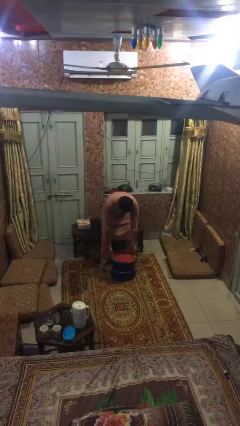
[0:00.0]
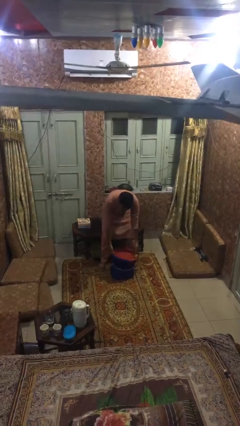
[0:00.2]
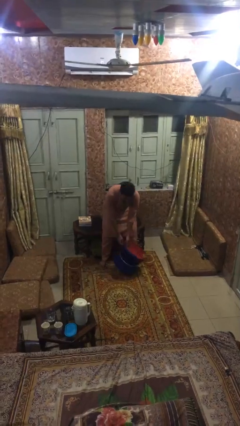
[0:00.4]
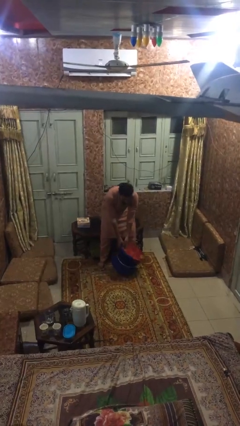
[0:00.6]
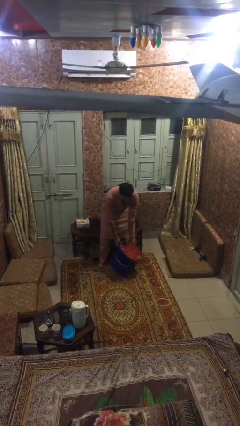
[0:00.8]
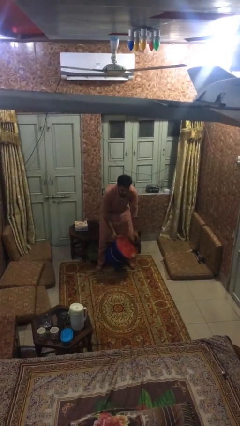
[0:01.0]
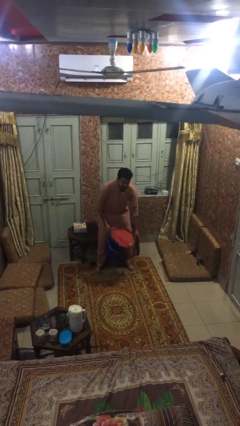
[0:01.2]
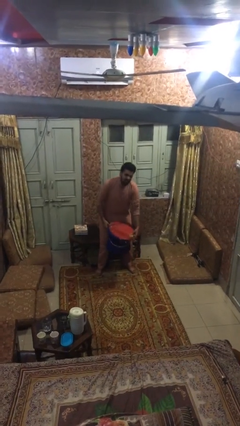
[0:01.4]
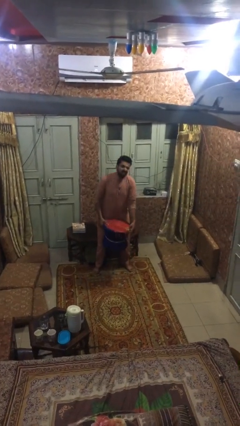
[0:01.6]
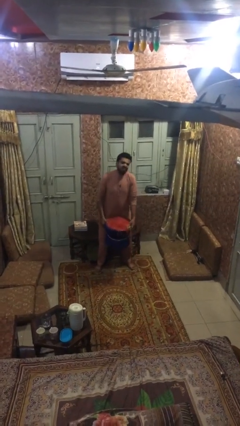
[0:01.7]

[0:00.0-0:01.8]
person picks up object from floor

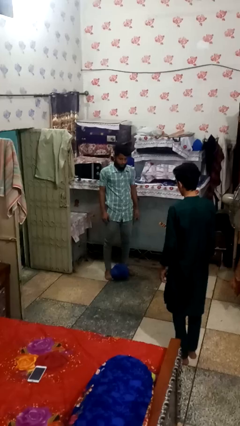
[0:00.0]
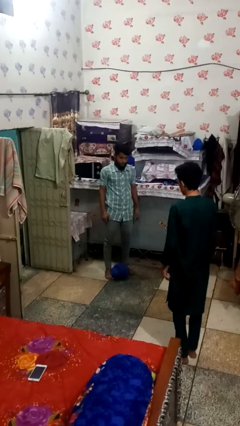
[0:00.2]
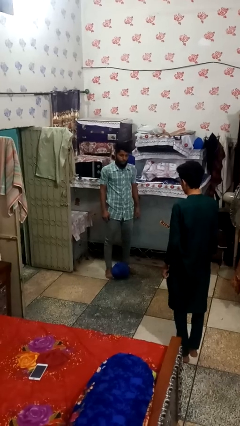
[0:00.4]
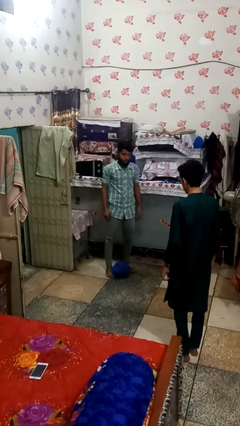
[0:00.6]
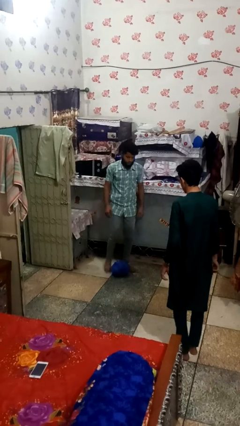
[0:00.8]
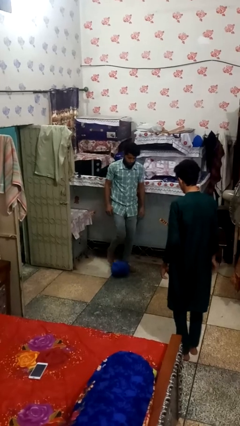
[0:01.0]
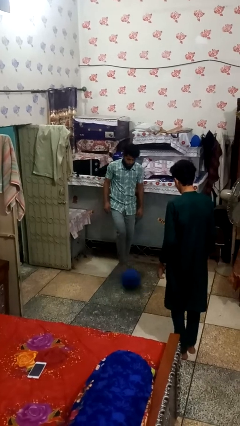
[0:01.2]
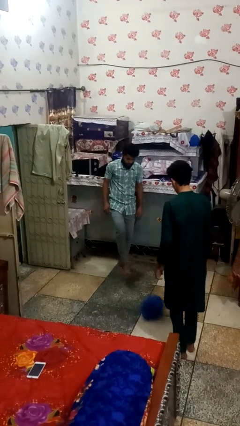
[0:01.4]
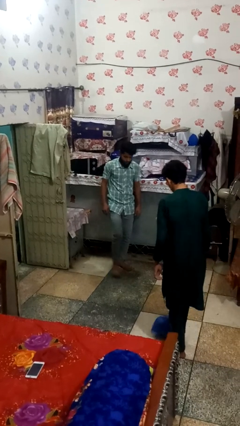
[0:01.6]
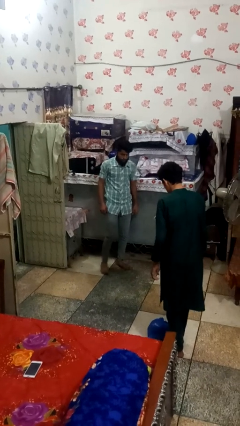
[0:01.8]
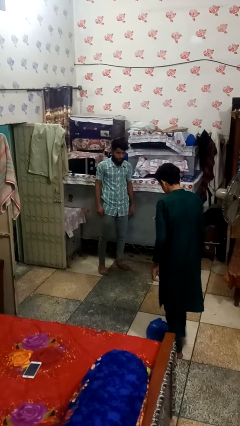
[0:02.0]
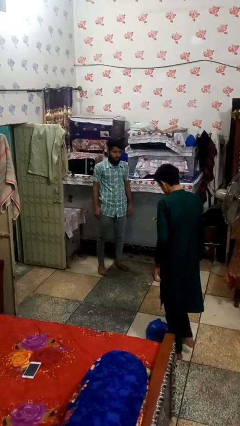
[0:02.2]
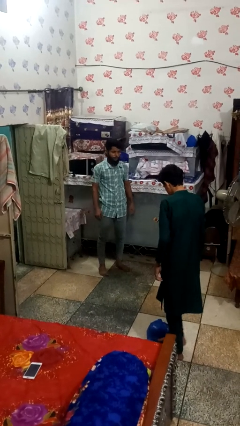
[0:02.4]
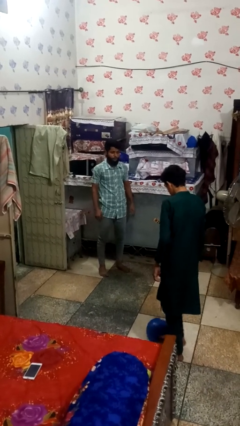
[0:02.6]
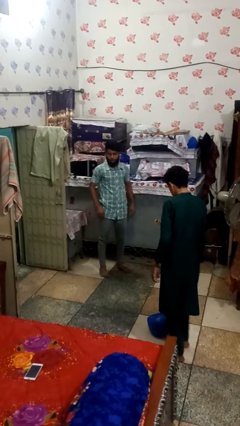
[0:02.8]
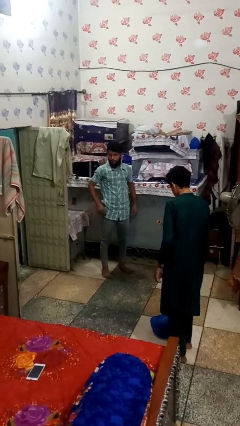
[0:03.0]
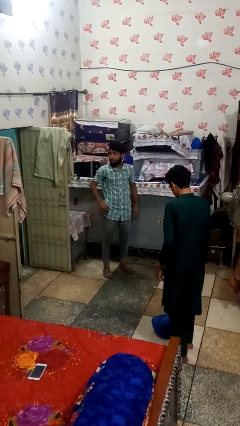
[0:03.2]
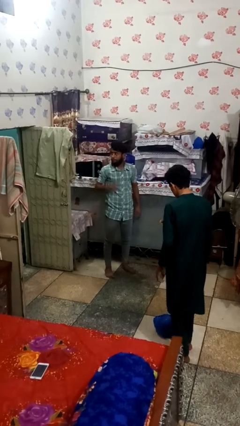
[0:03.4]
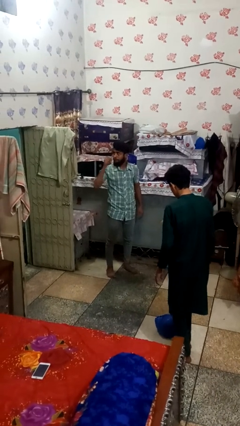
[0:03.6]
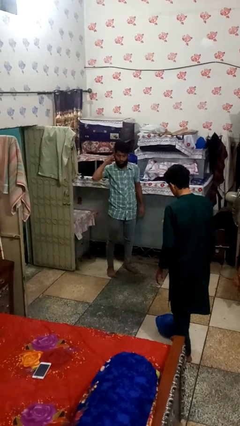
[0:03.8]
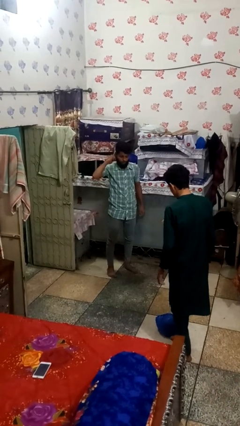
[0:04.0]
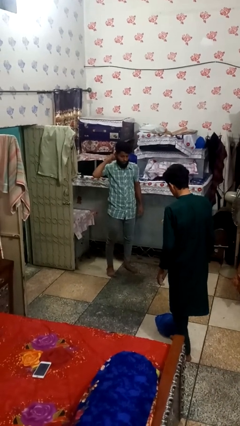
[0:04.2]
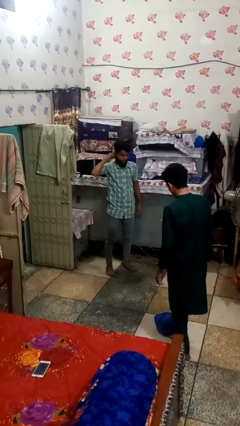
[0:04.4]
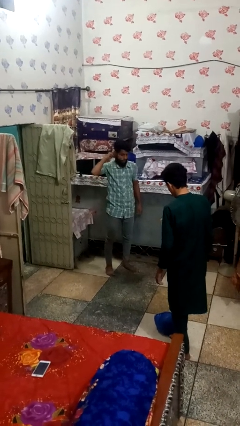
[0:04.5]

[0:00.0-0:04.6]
person kicks object to person

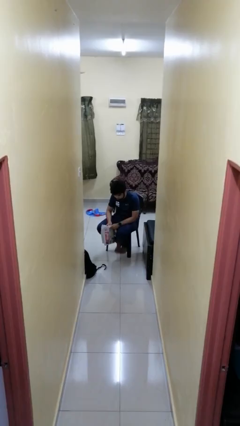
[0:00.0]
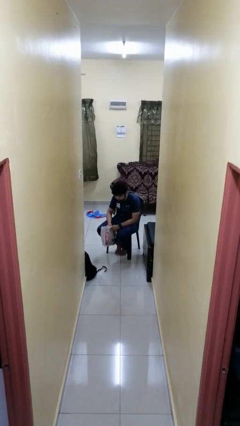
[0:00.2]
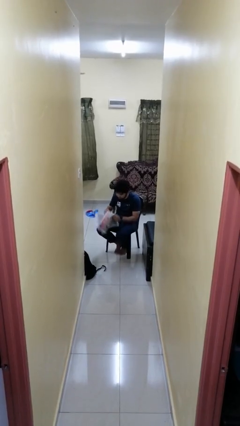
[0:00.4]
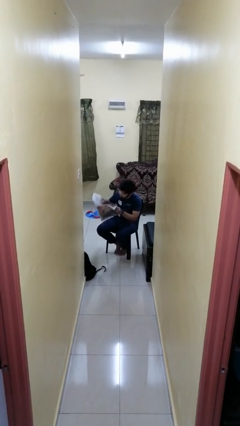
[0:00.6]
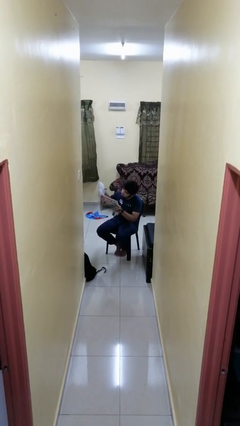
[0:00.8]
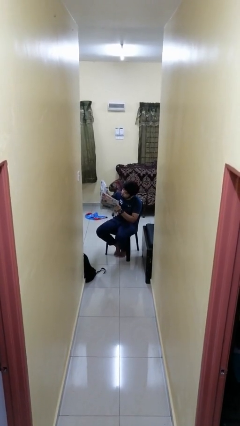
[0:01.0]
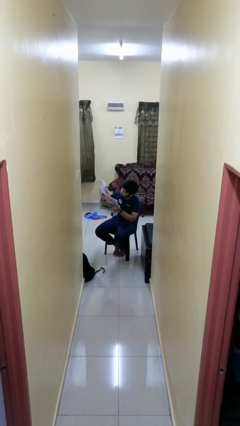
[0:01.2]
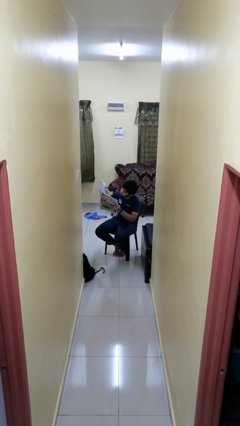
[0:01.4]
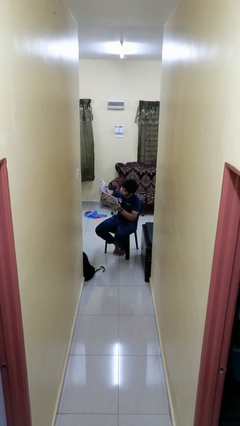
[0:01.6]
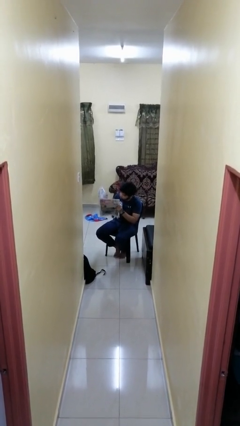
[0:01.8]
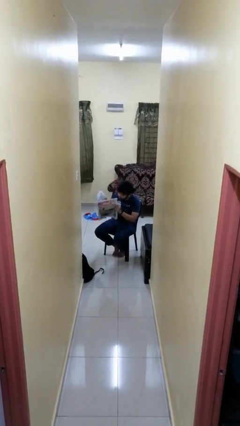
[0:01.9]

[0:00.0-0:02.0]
person reads newspaper

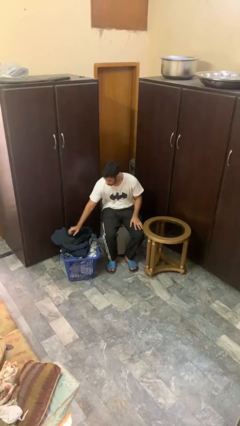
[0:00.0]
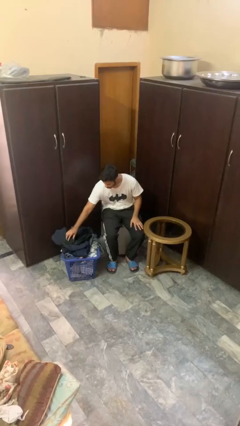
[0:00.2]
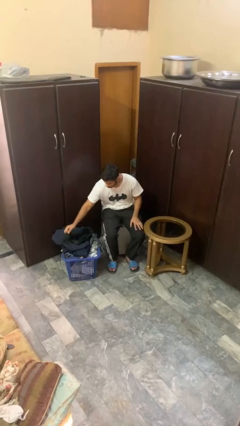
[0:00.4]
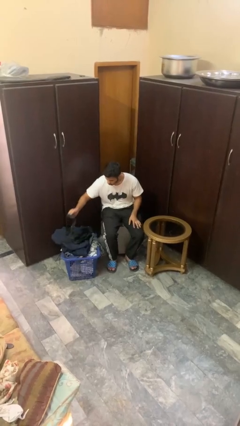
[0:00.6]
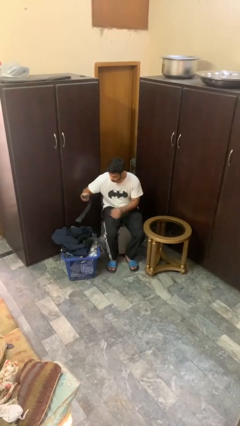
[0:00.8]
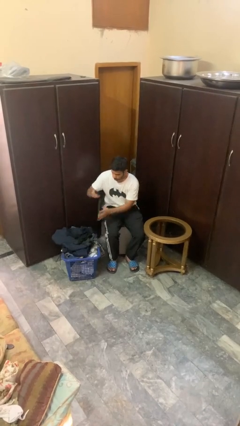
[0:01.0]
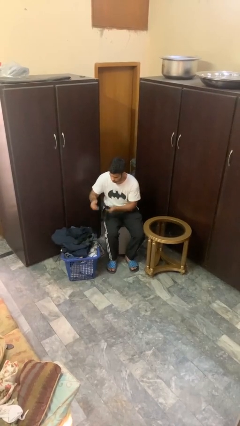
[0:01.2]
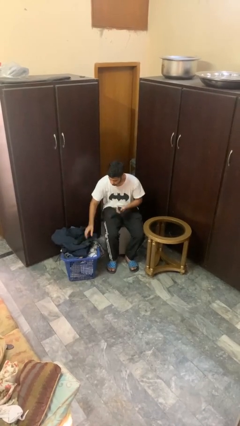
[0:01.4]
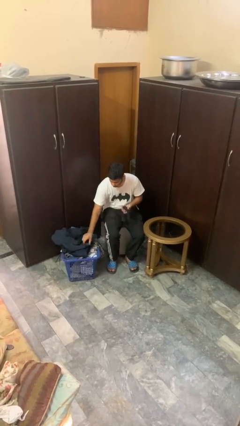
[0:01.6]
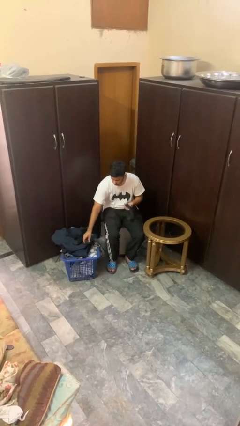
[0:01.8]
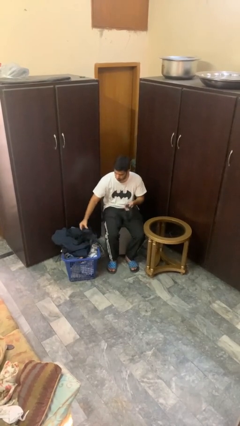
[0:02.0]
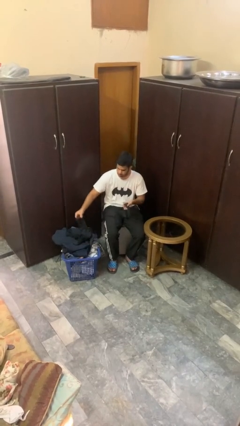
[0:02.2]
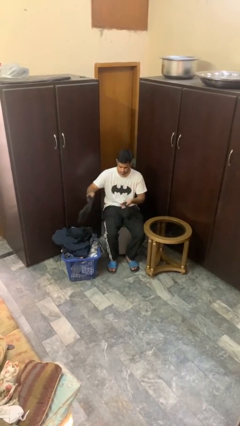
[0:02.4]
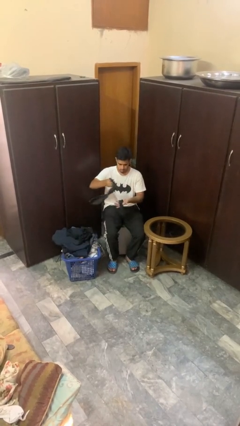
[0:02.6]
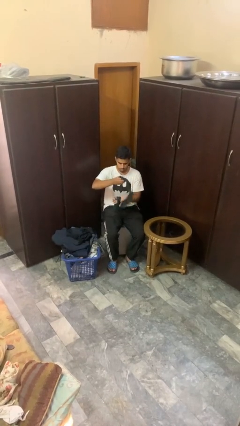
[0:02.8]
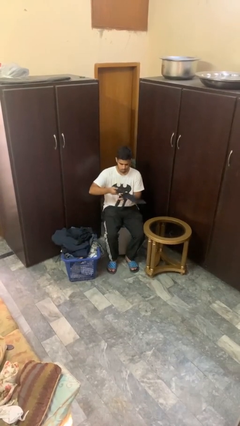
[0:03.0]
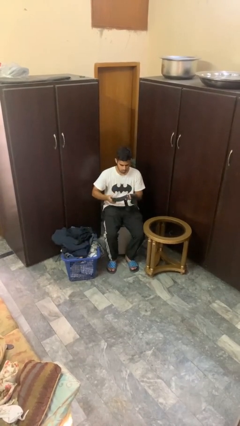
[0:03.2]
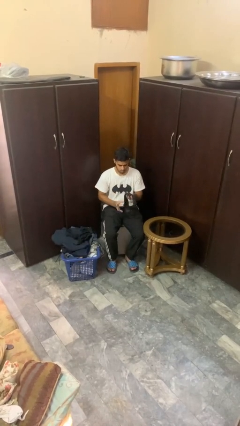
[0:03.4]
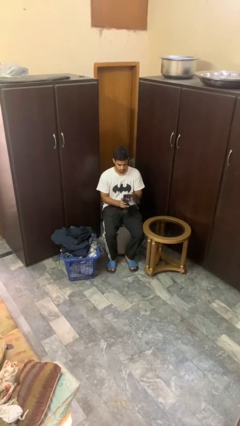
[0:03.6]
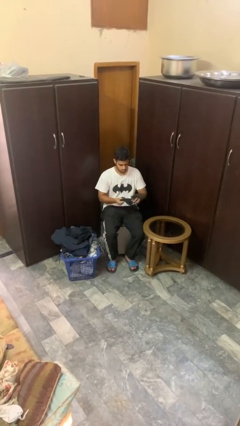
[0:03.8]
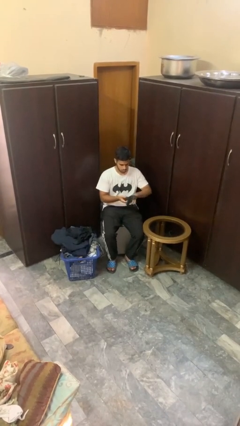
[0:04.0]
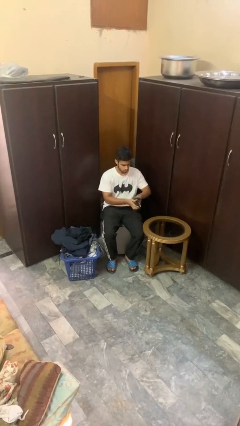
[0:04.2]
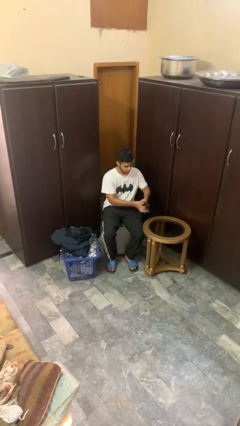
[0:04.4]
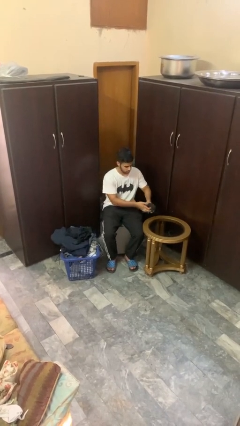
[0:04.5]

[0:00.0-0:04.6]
person folds socks

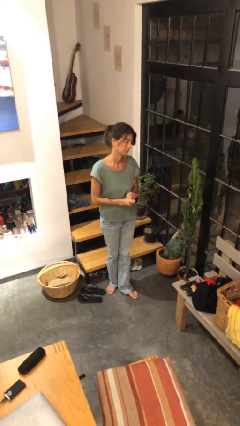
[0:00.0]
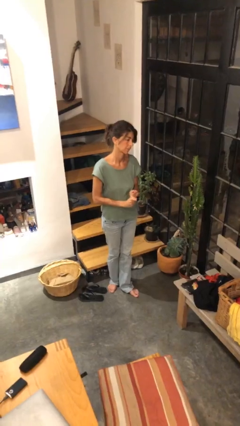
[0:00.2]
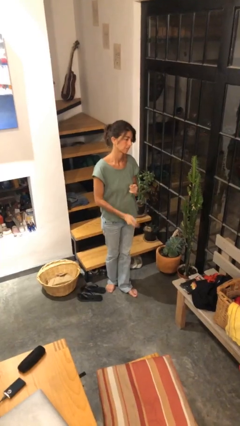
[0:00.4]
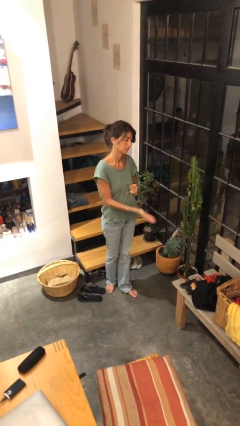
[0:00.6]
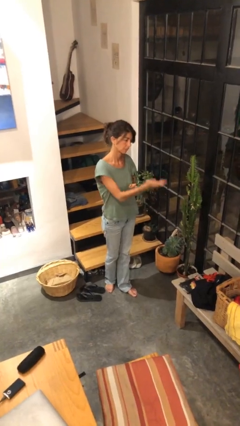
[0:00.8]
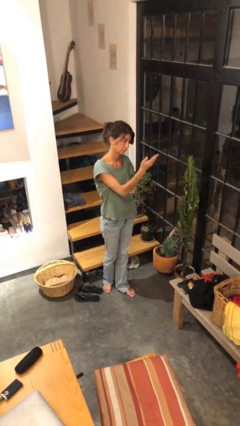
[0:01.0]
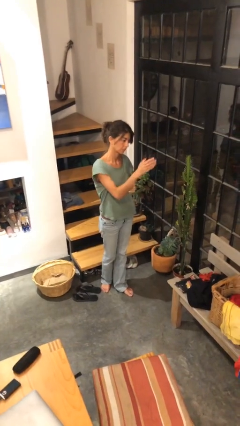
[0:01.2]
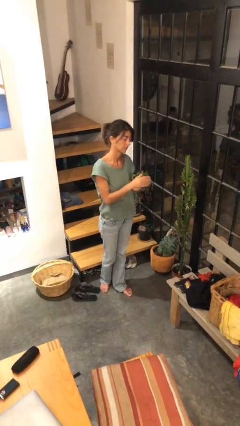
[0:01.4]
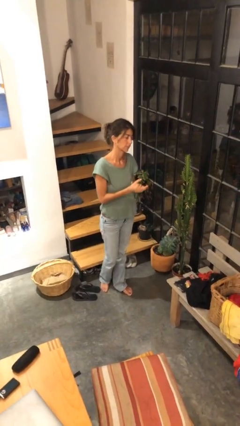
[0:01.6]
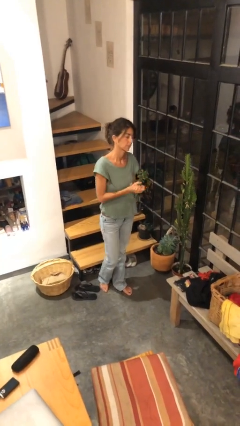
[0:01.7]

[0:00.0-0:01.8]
person gestures swipe up

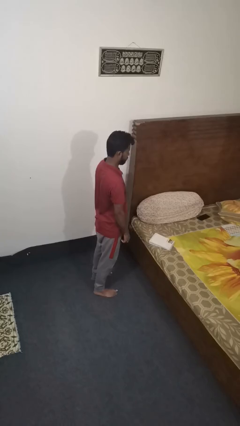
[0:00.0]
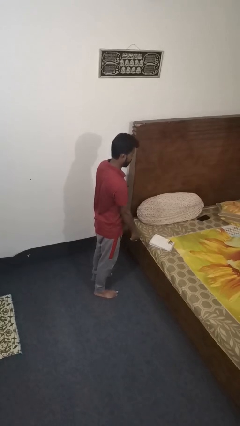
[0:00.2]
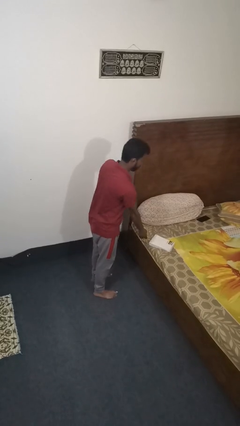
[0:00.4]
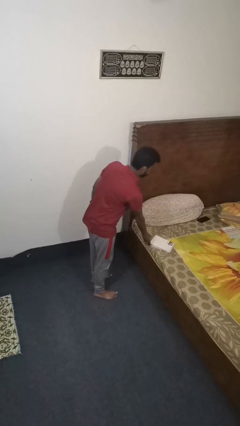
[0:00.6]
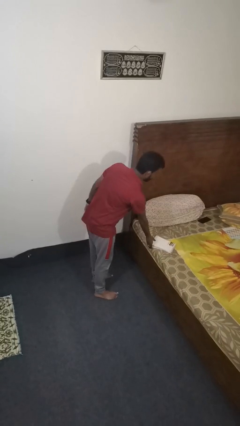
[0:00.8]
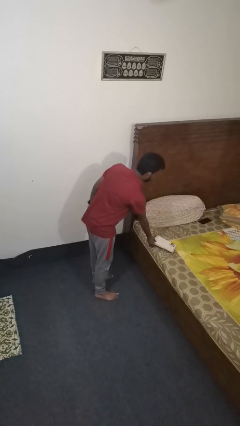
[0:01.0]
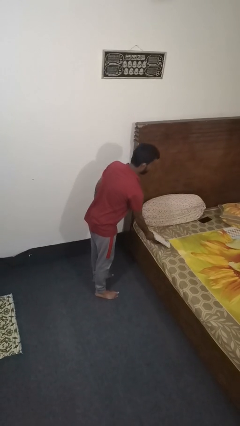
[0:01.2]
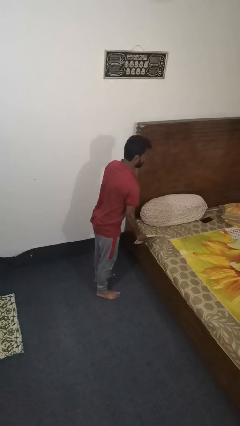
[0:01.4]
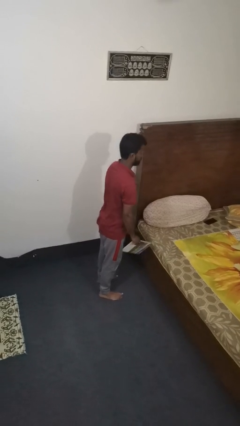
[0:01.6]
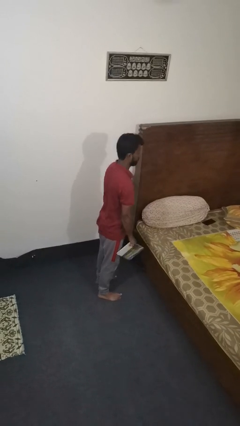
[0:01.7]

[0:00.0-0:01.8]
person picks up object from bed

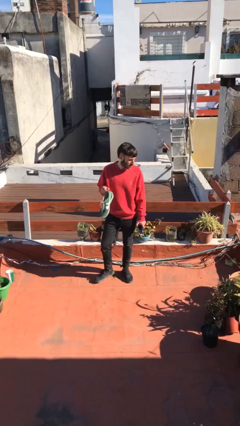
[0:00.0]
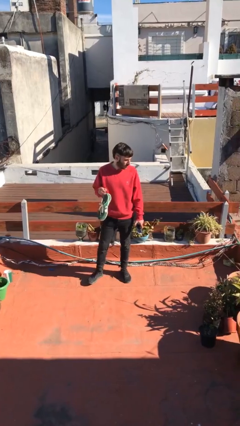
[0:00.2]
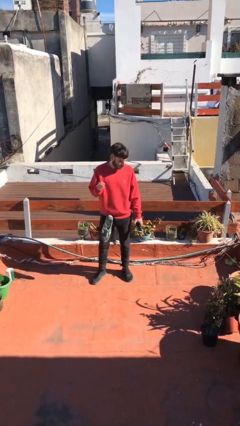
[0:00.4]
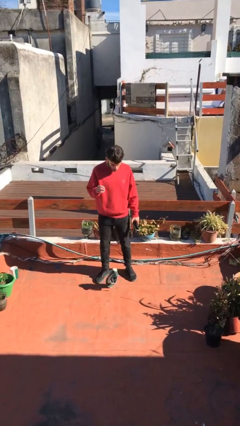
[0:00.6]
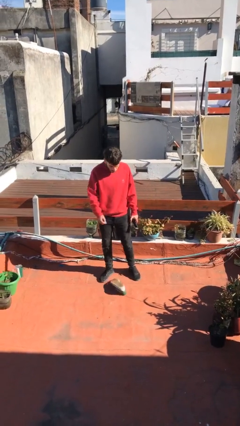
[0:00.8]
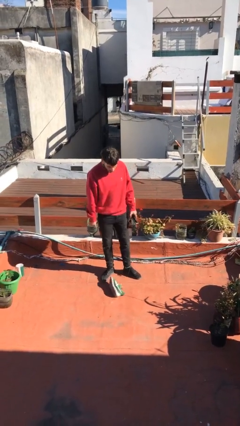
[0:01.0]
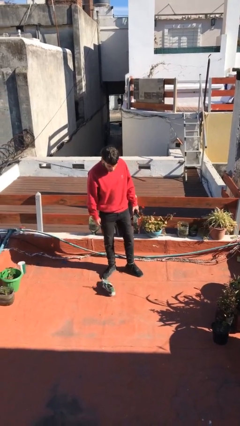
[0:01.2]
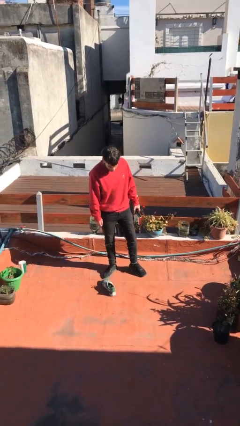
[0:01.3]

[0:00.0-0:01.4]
person drops object
